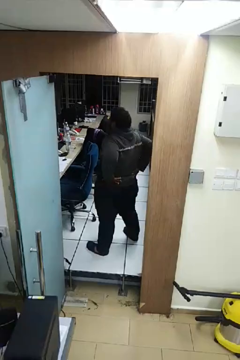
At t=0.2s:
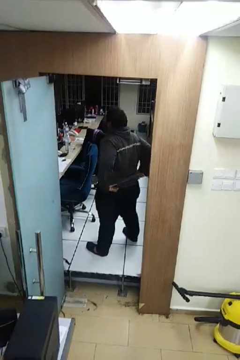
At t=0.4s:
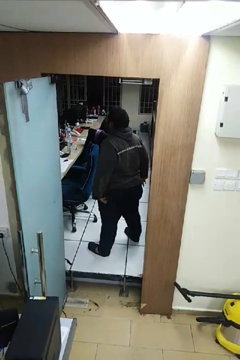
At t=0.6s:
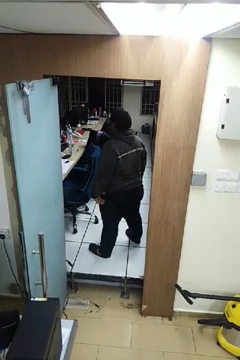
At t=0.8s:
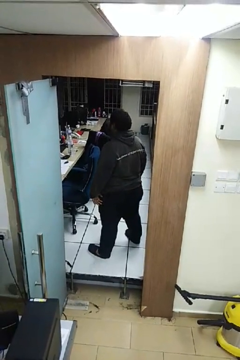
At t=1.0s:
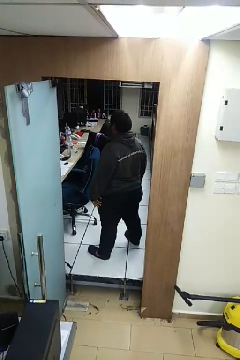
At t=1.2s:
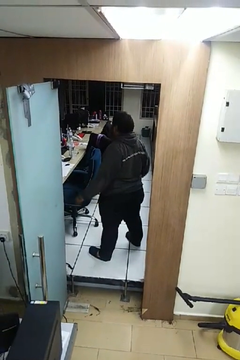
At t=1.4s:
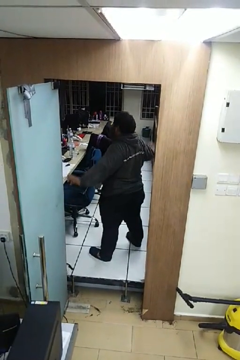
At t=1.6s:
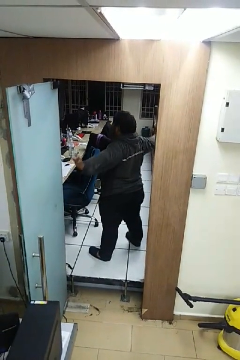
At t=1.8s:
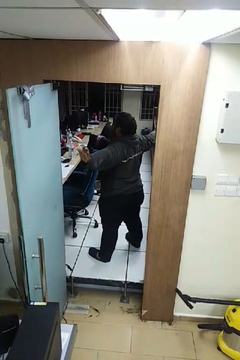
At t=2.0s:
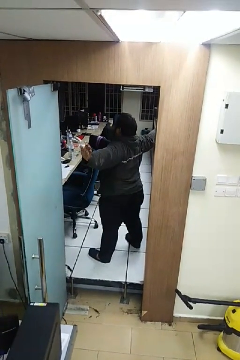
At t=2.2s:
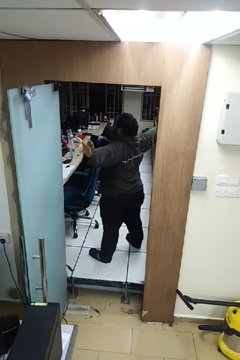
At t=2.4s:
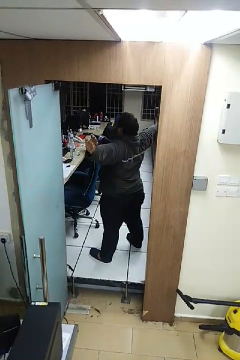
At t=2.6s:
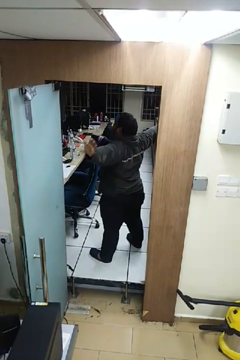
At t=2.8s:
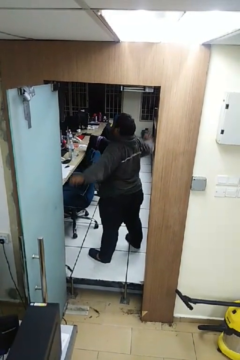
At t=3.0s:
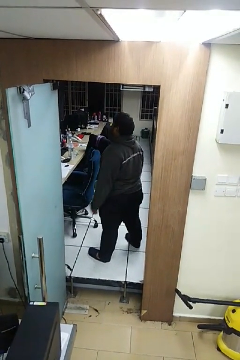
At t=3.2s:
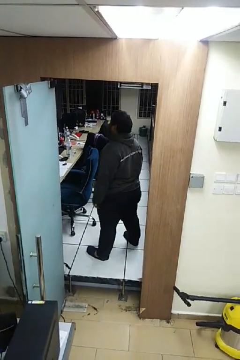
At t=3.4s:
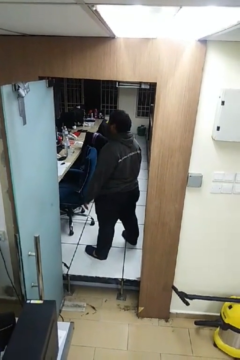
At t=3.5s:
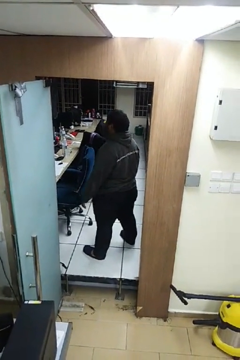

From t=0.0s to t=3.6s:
person stretches arms to side

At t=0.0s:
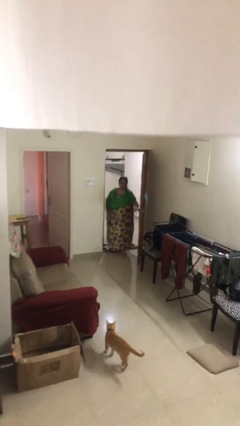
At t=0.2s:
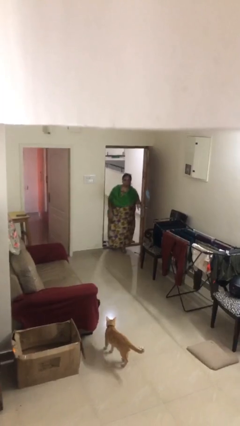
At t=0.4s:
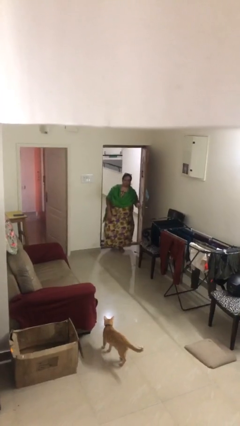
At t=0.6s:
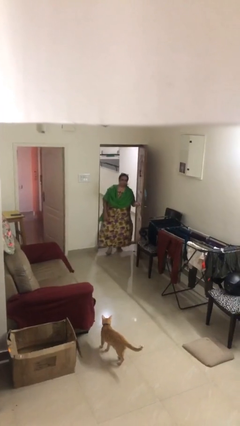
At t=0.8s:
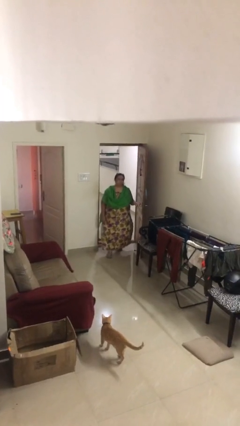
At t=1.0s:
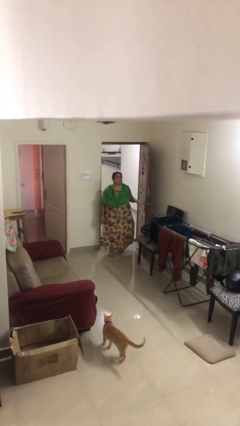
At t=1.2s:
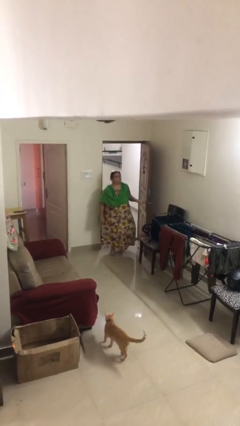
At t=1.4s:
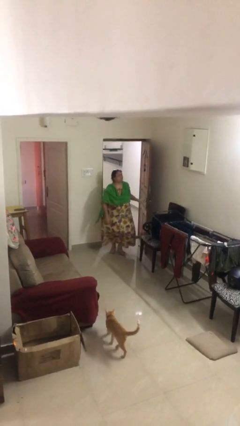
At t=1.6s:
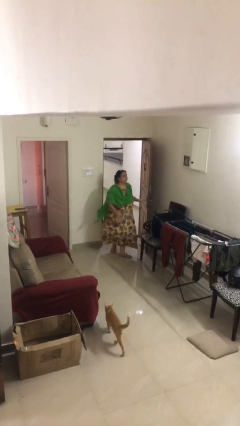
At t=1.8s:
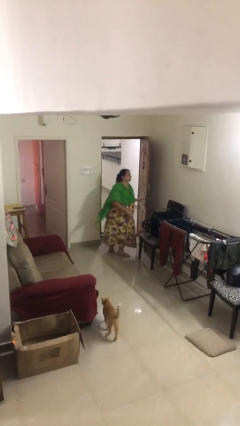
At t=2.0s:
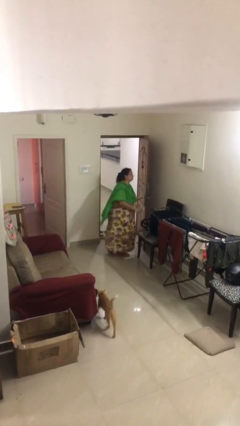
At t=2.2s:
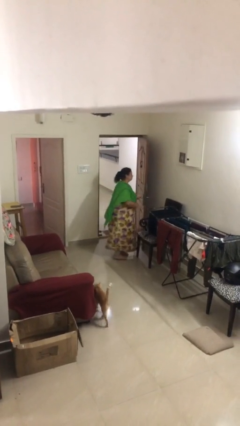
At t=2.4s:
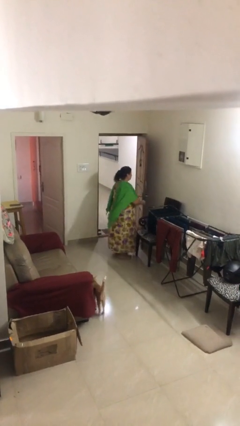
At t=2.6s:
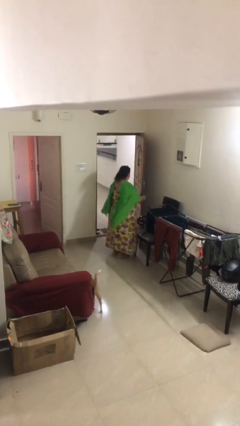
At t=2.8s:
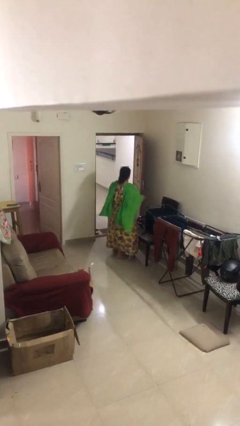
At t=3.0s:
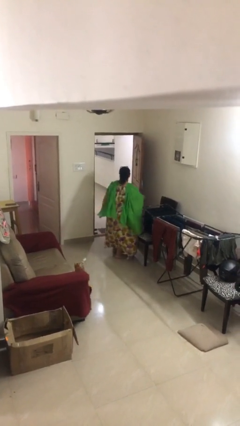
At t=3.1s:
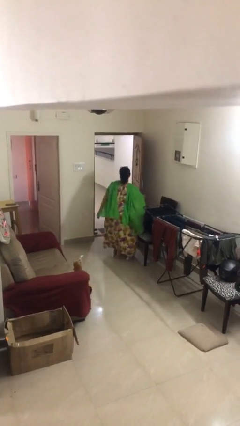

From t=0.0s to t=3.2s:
person enters scene through structure

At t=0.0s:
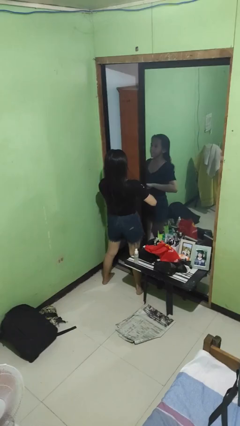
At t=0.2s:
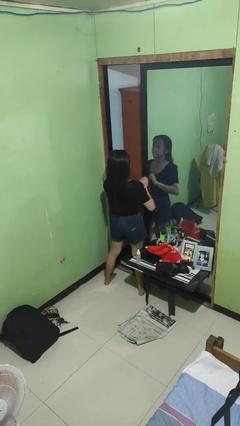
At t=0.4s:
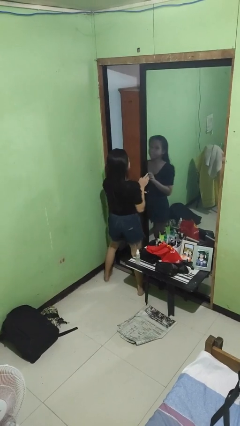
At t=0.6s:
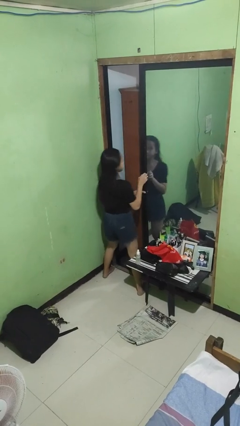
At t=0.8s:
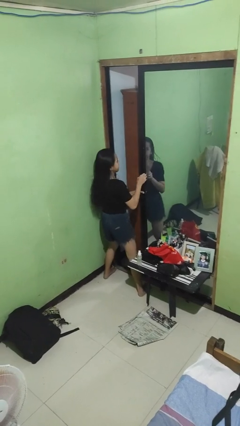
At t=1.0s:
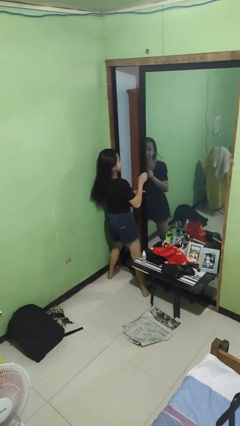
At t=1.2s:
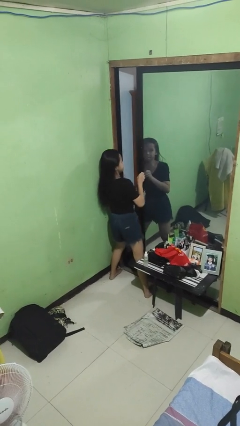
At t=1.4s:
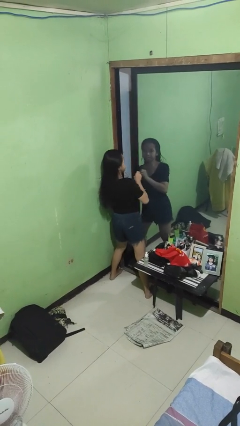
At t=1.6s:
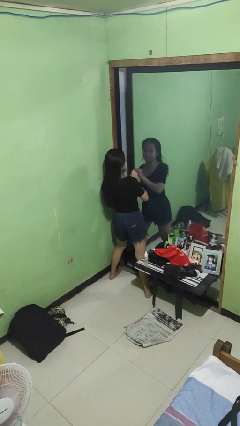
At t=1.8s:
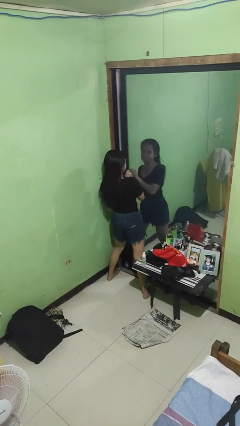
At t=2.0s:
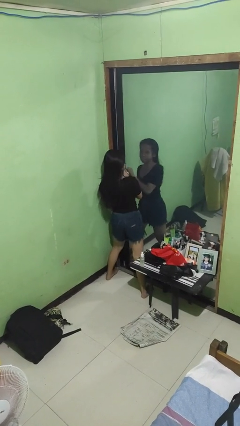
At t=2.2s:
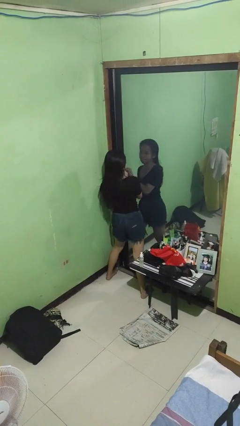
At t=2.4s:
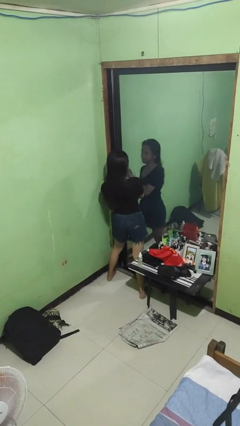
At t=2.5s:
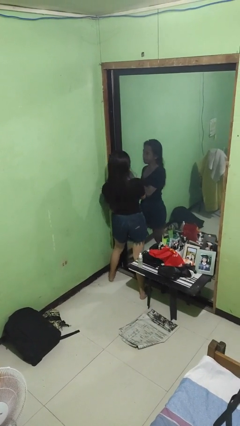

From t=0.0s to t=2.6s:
person closes sliding door

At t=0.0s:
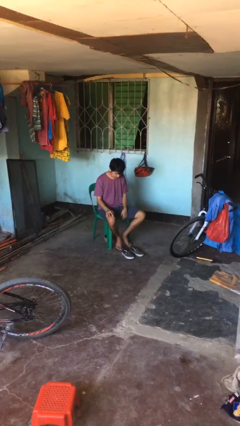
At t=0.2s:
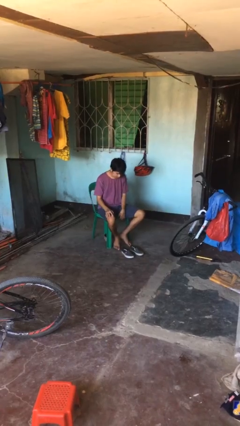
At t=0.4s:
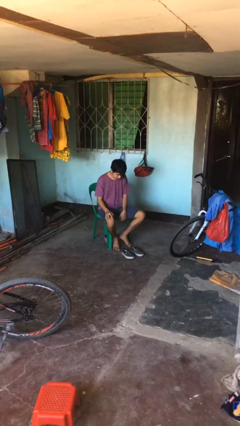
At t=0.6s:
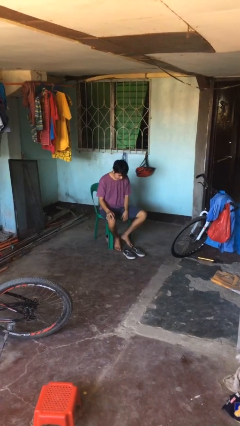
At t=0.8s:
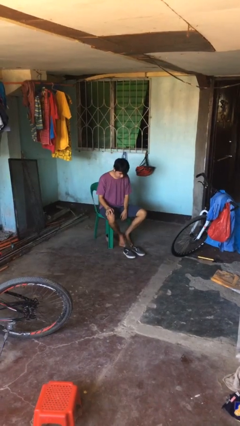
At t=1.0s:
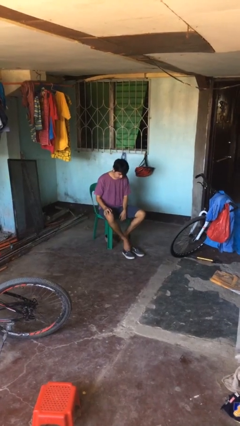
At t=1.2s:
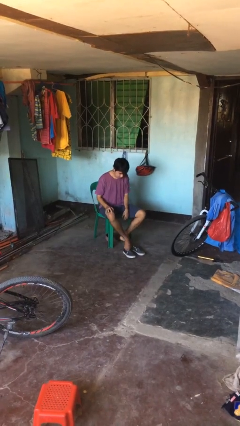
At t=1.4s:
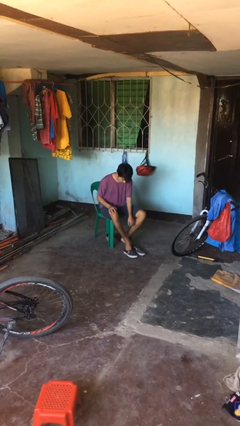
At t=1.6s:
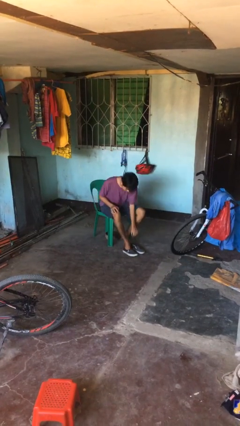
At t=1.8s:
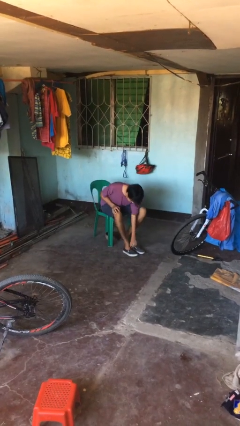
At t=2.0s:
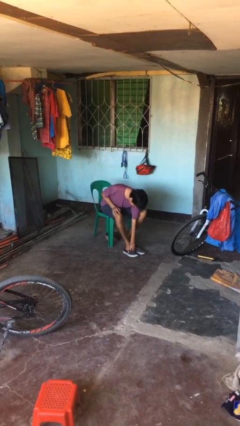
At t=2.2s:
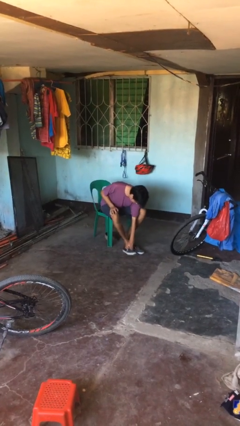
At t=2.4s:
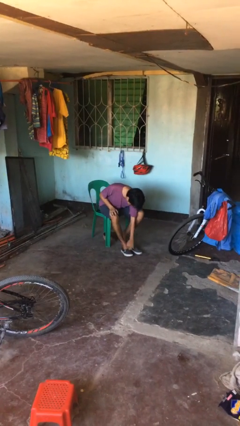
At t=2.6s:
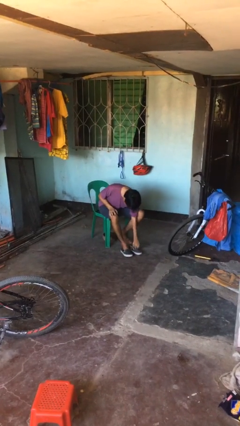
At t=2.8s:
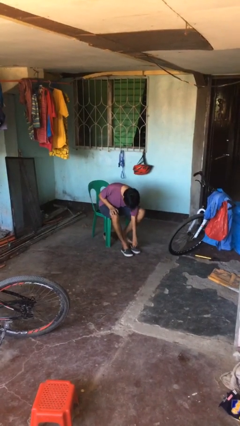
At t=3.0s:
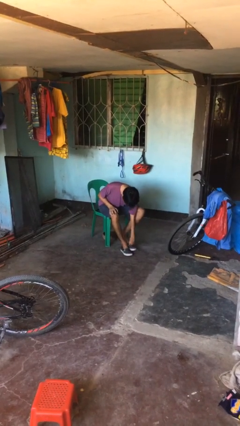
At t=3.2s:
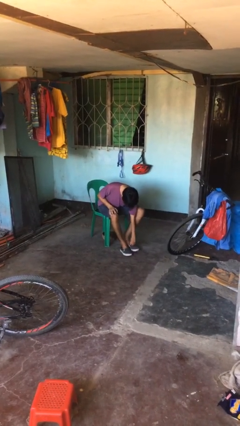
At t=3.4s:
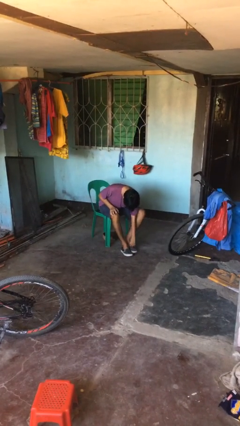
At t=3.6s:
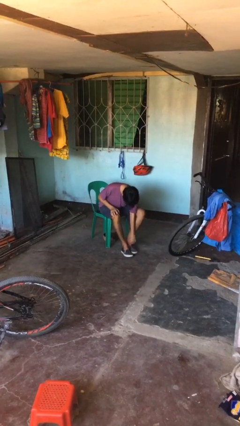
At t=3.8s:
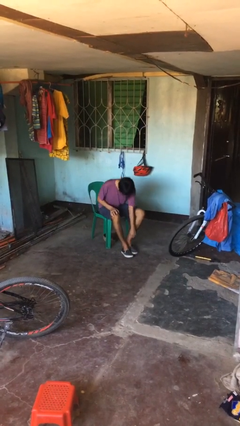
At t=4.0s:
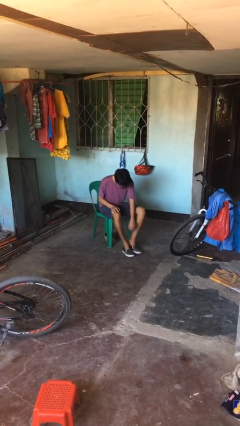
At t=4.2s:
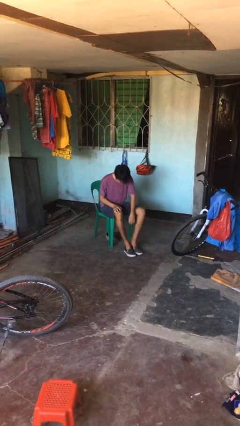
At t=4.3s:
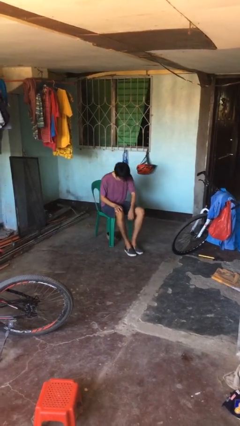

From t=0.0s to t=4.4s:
person puts on shoes

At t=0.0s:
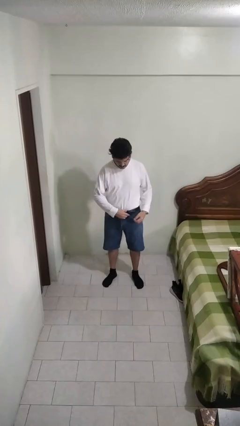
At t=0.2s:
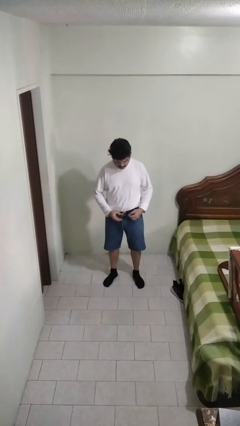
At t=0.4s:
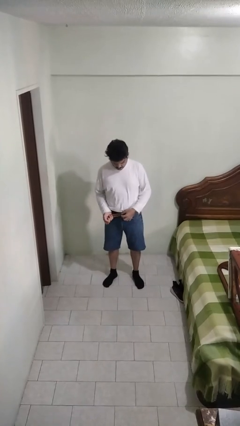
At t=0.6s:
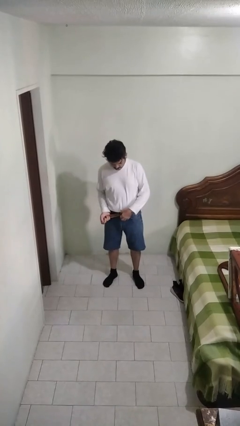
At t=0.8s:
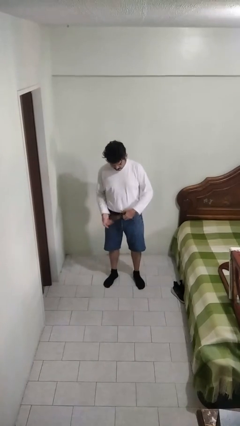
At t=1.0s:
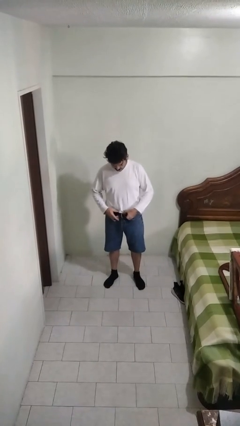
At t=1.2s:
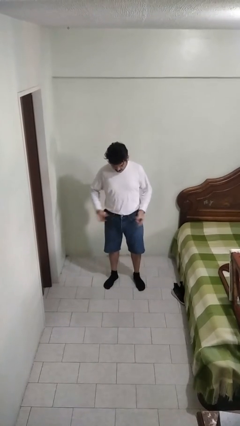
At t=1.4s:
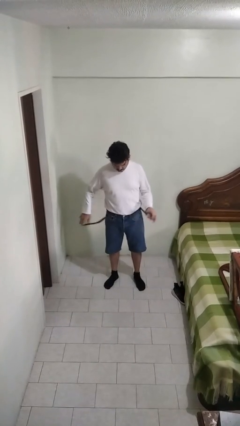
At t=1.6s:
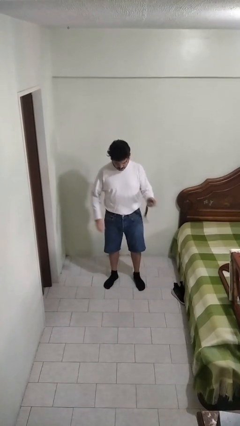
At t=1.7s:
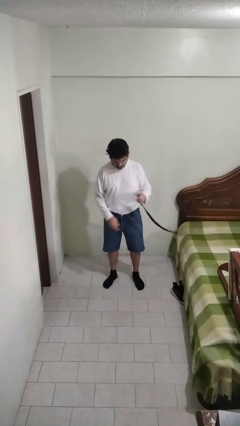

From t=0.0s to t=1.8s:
person takes off belt

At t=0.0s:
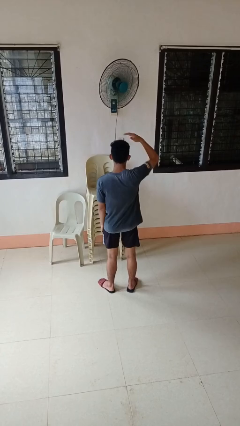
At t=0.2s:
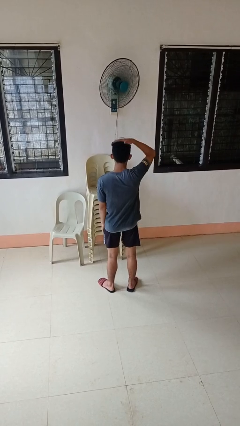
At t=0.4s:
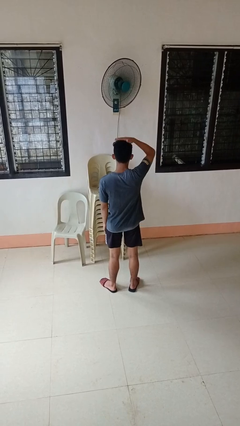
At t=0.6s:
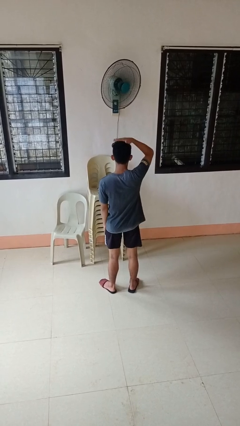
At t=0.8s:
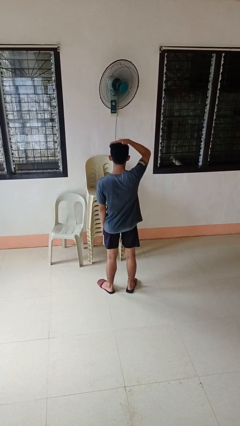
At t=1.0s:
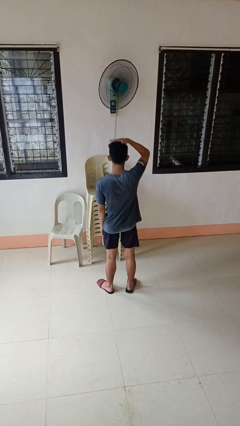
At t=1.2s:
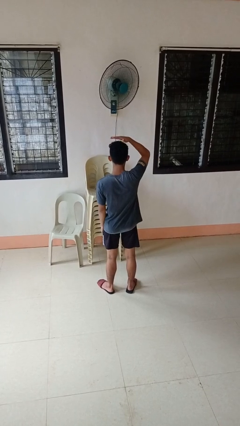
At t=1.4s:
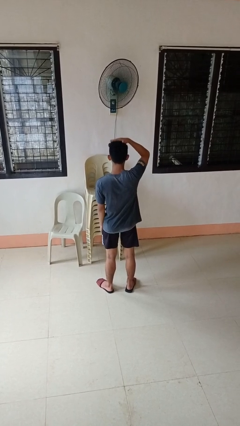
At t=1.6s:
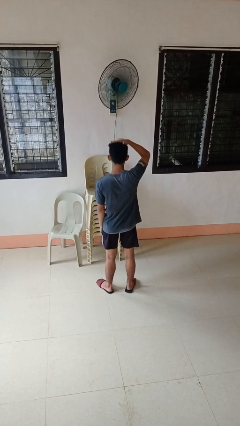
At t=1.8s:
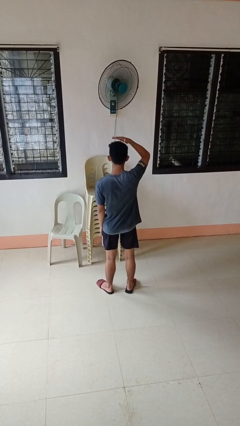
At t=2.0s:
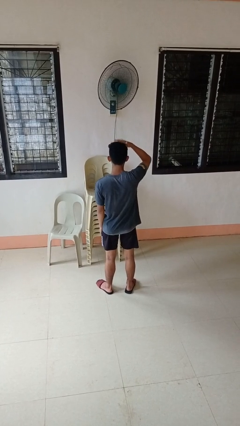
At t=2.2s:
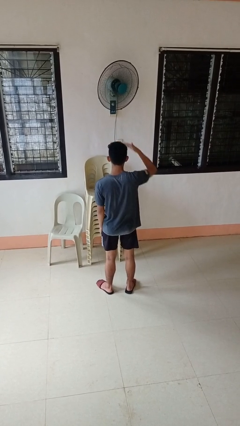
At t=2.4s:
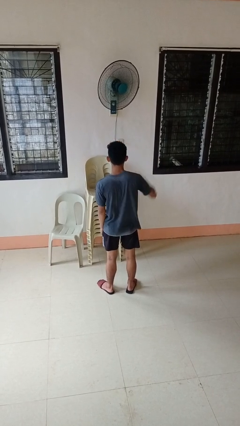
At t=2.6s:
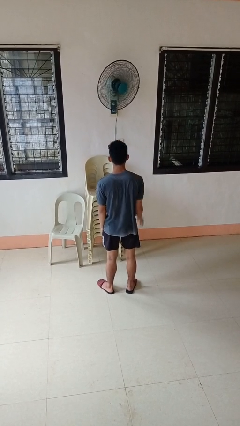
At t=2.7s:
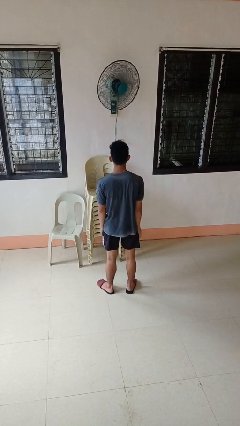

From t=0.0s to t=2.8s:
person pats head
